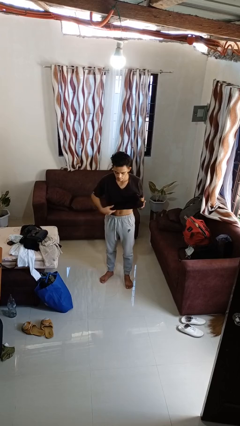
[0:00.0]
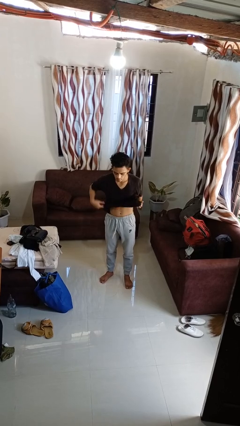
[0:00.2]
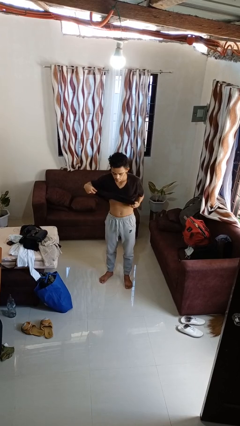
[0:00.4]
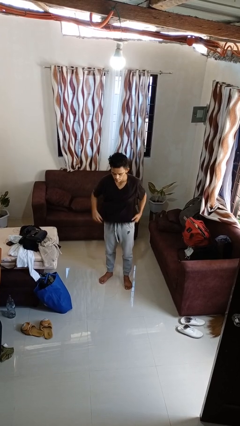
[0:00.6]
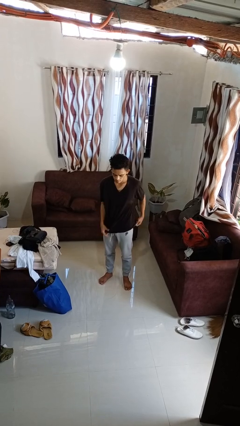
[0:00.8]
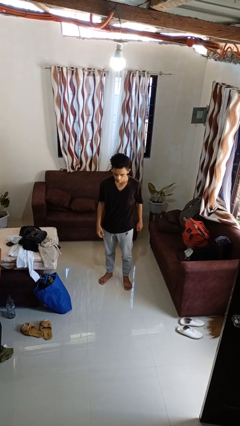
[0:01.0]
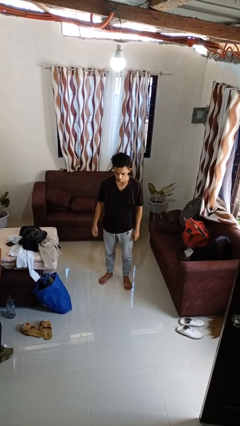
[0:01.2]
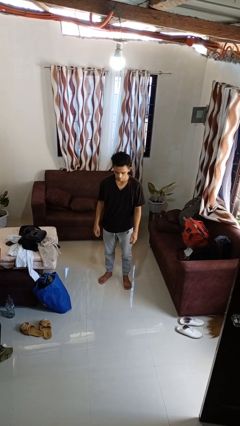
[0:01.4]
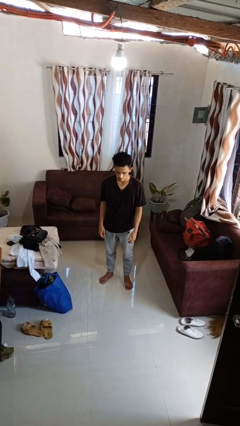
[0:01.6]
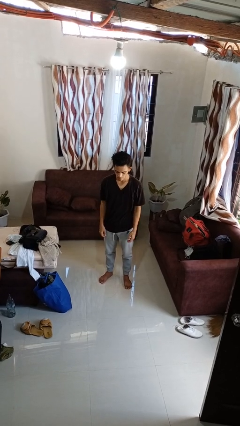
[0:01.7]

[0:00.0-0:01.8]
person untucks shirt

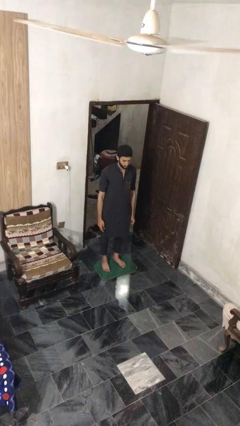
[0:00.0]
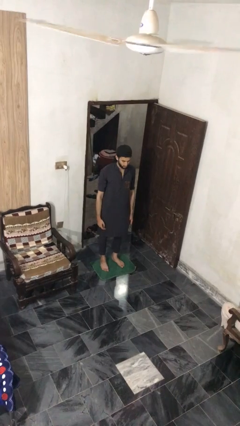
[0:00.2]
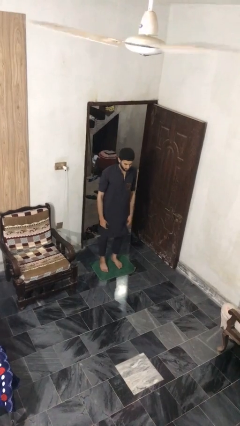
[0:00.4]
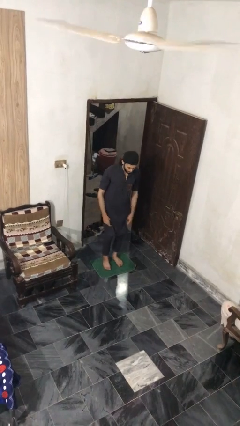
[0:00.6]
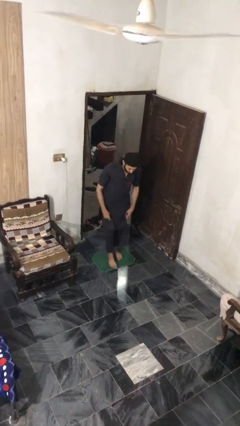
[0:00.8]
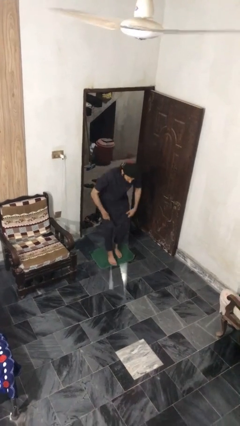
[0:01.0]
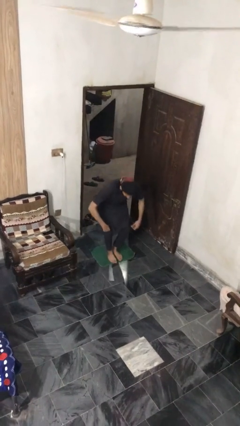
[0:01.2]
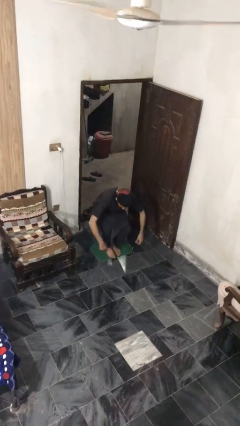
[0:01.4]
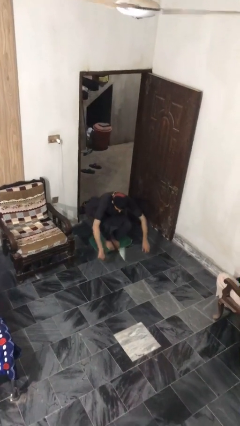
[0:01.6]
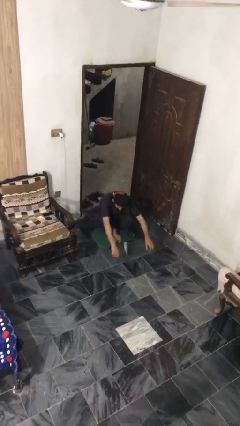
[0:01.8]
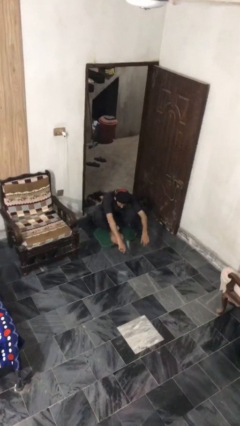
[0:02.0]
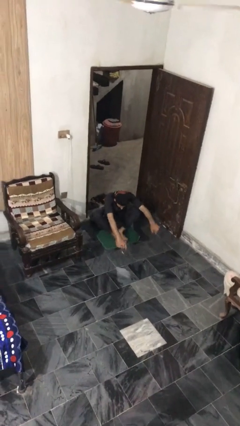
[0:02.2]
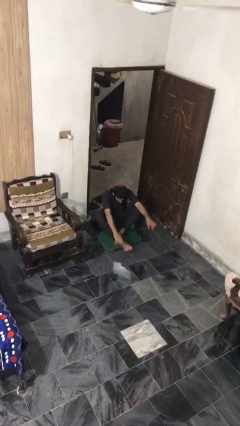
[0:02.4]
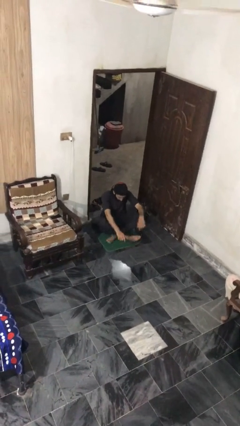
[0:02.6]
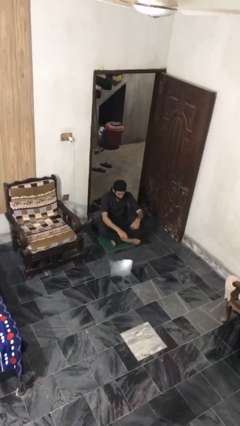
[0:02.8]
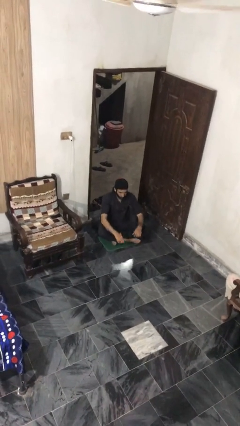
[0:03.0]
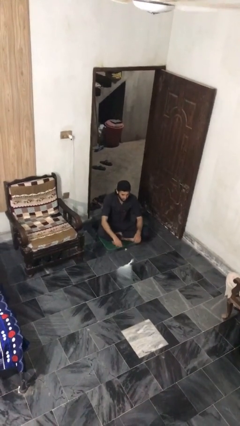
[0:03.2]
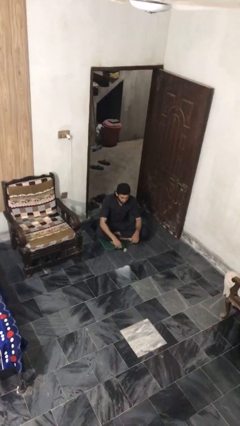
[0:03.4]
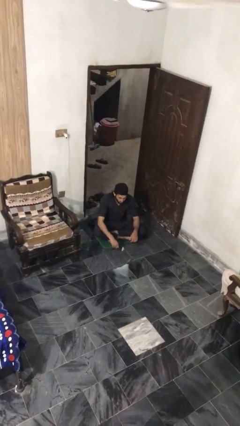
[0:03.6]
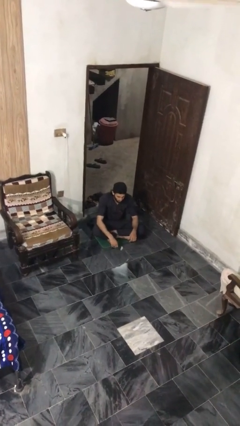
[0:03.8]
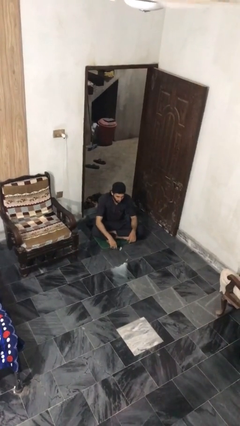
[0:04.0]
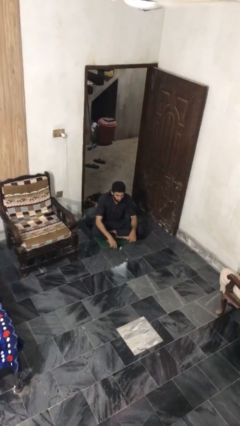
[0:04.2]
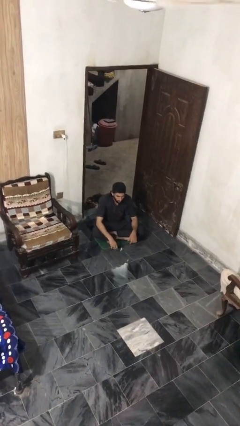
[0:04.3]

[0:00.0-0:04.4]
person sits crisscross

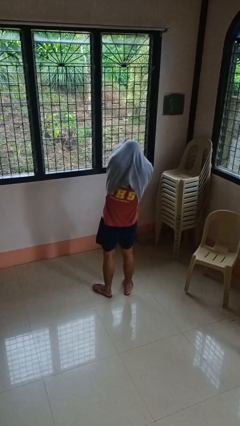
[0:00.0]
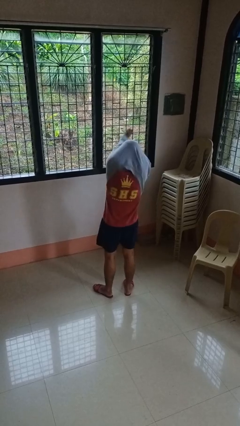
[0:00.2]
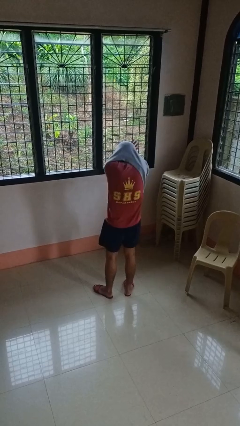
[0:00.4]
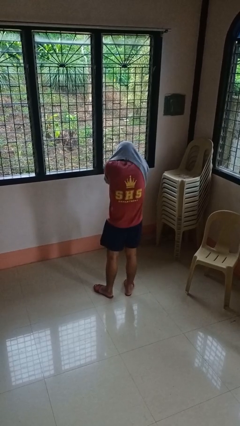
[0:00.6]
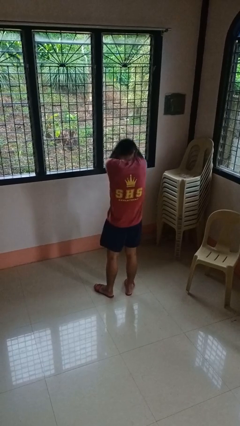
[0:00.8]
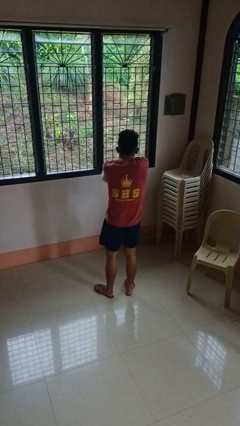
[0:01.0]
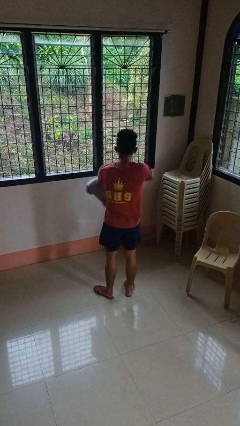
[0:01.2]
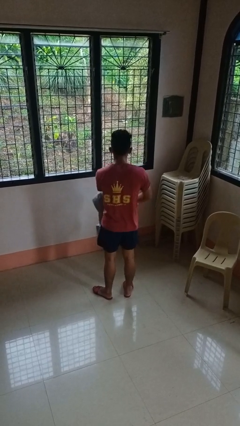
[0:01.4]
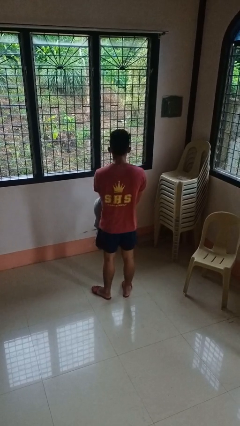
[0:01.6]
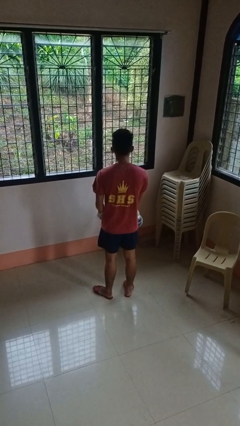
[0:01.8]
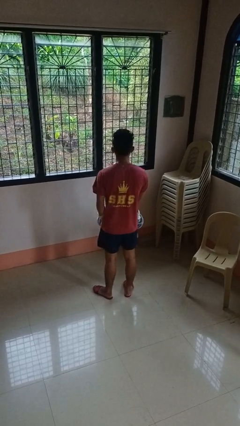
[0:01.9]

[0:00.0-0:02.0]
person takes off hoodie

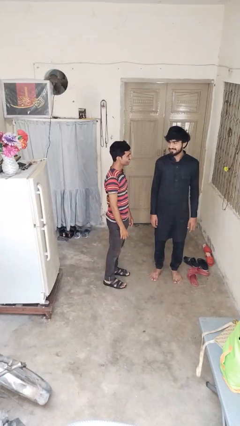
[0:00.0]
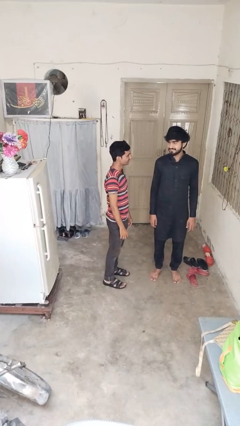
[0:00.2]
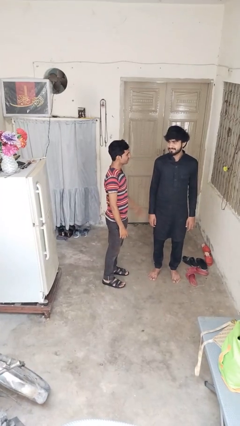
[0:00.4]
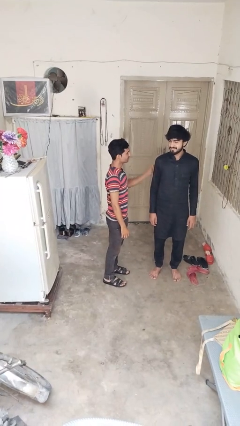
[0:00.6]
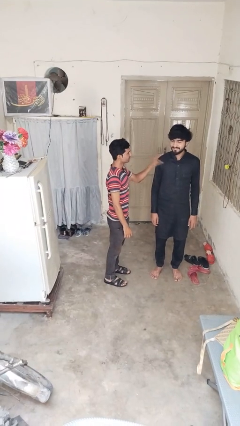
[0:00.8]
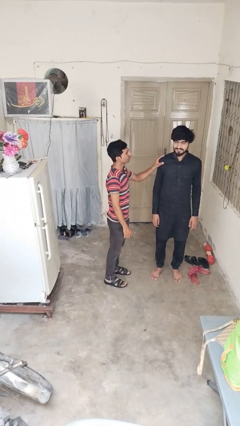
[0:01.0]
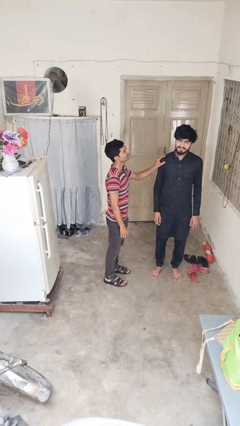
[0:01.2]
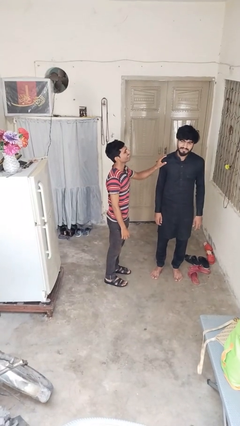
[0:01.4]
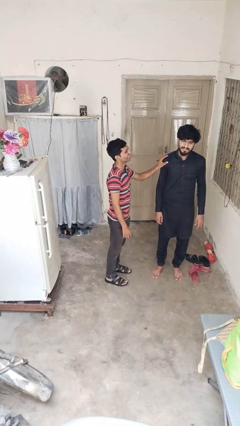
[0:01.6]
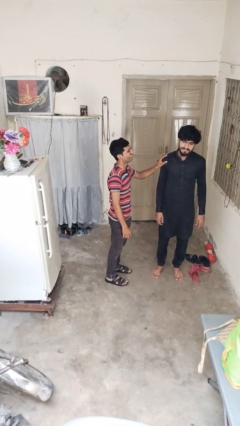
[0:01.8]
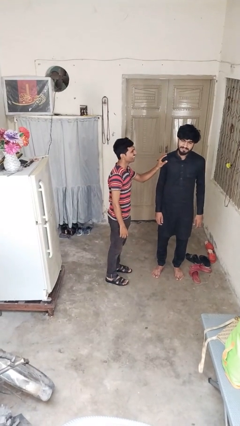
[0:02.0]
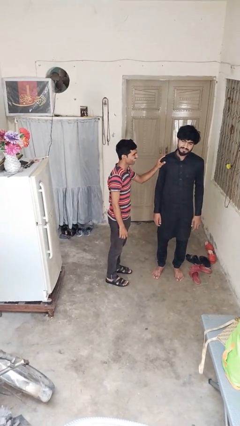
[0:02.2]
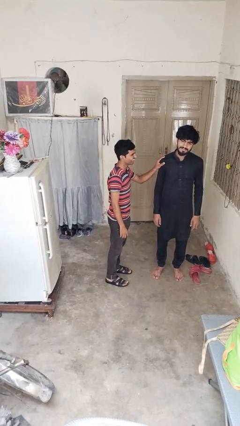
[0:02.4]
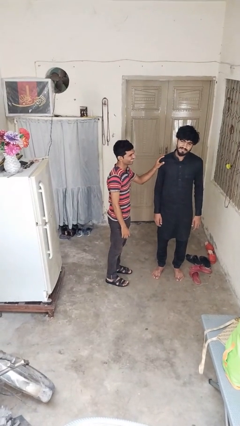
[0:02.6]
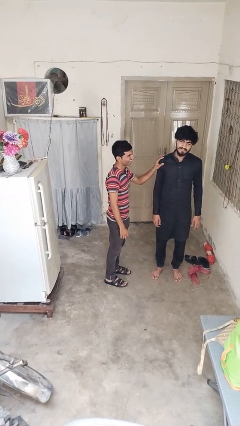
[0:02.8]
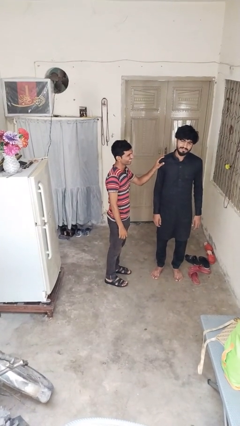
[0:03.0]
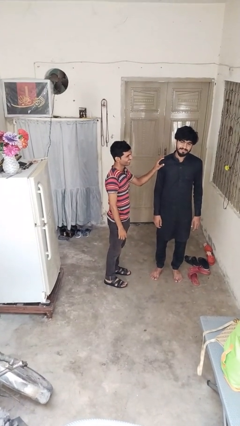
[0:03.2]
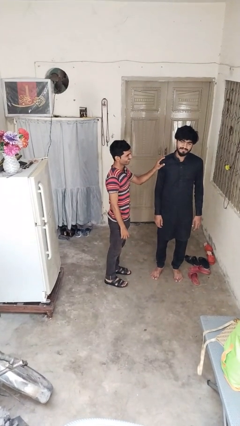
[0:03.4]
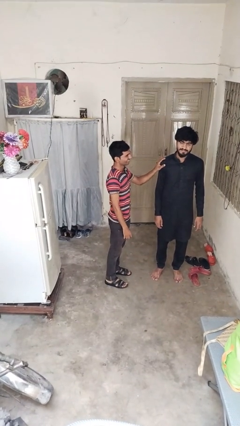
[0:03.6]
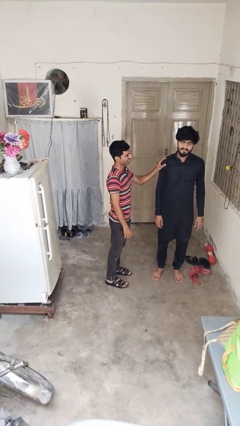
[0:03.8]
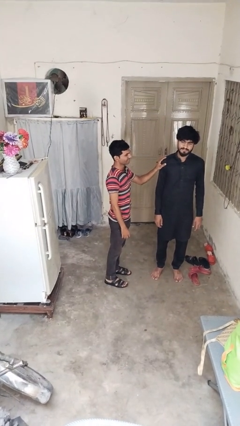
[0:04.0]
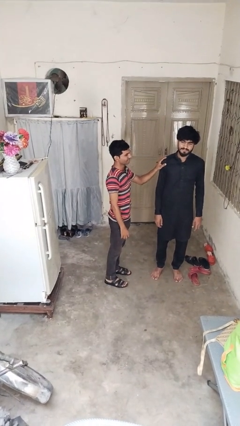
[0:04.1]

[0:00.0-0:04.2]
person grabs person by shoulder

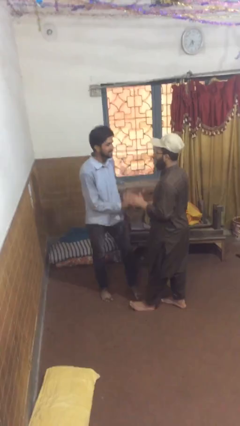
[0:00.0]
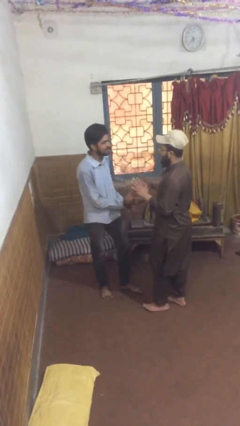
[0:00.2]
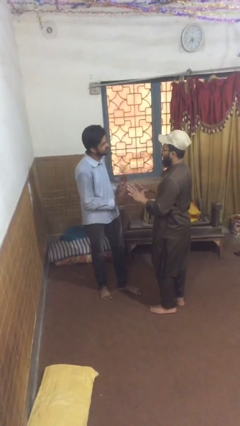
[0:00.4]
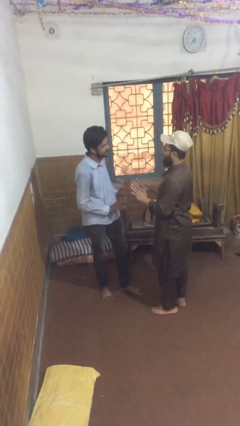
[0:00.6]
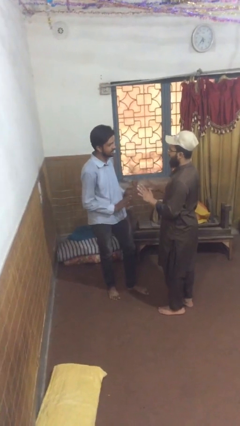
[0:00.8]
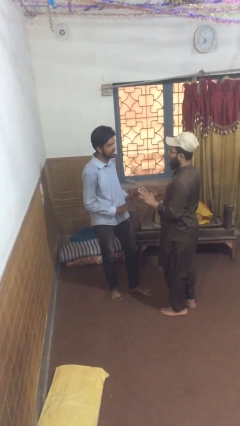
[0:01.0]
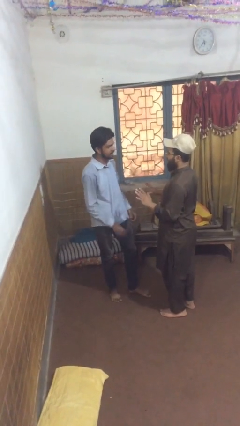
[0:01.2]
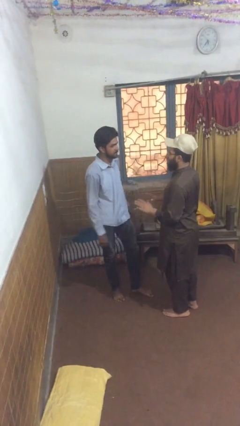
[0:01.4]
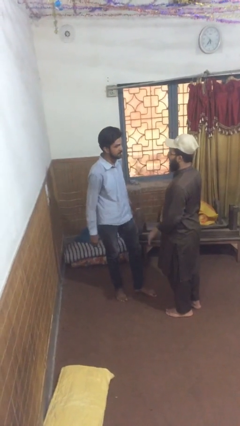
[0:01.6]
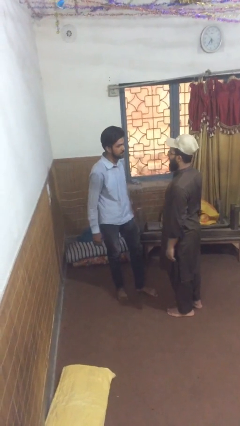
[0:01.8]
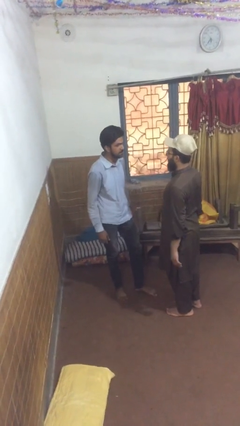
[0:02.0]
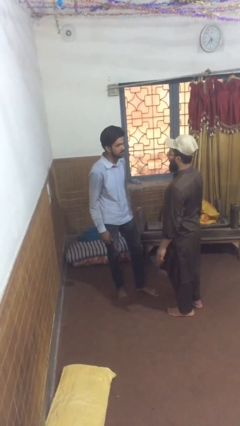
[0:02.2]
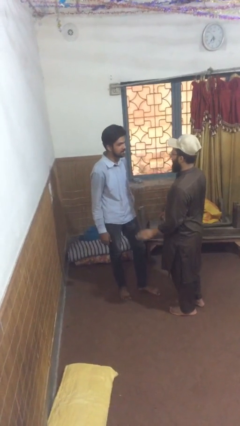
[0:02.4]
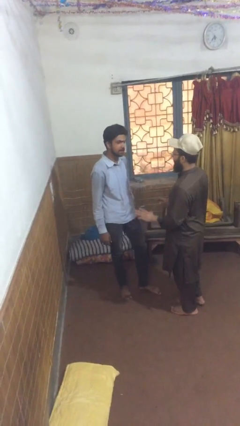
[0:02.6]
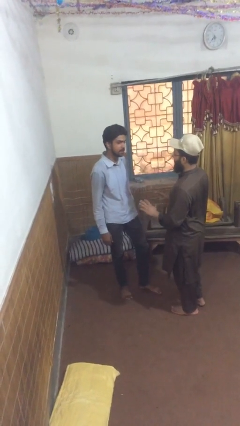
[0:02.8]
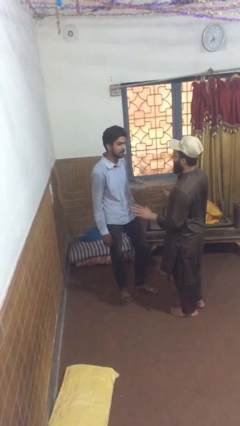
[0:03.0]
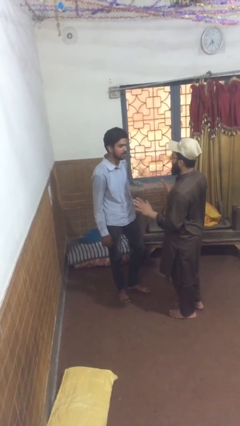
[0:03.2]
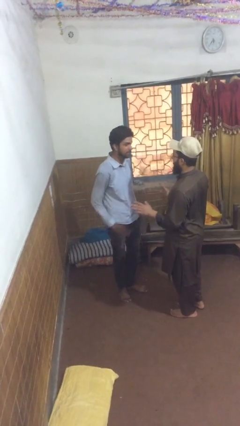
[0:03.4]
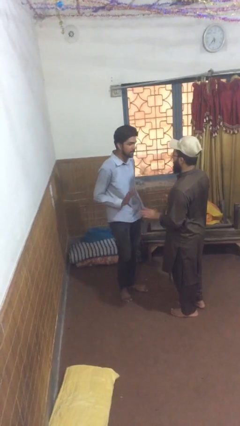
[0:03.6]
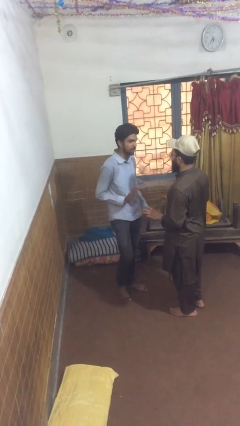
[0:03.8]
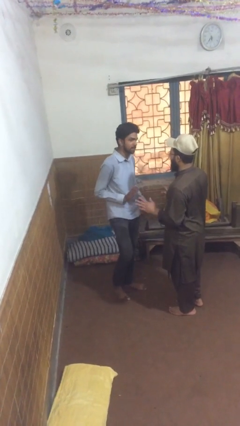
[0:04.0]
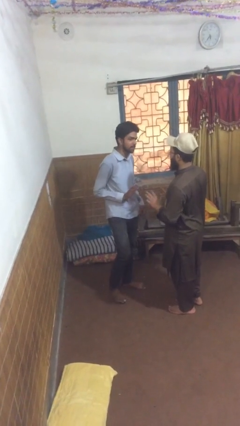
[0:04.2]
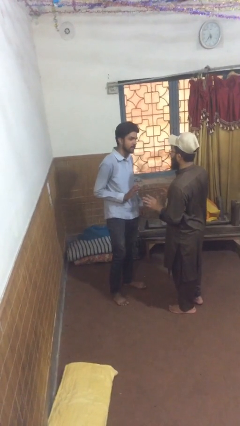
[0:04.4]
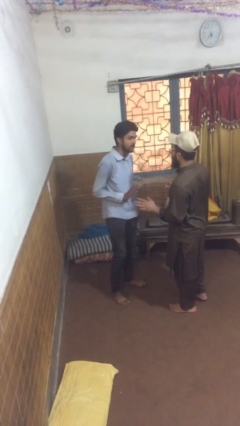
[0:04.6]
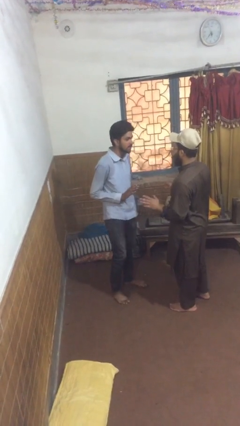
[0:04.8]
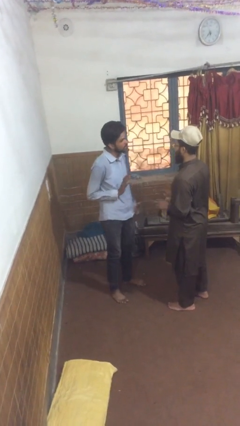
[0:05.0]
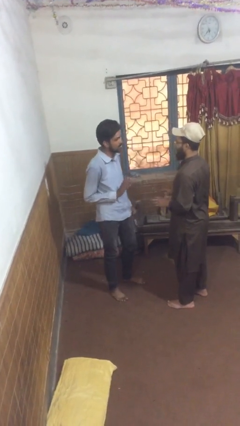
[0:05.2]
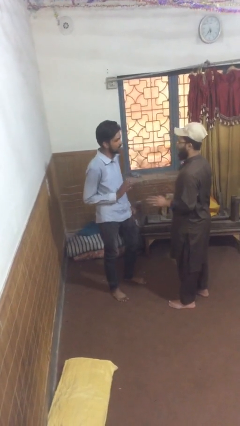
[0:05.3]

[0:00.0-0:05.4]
person talks to person
